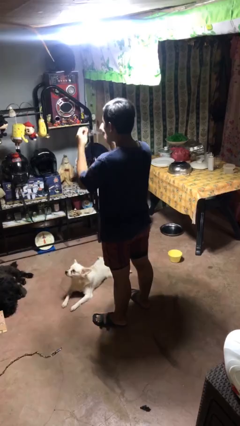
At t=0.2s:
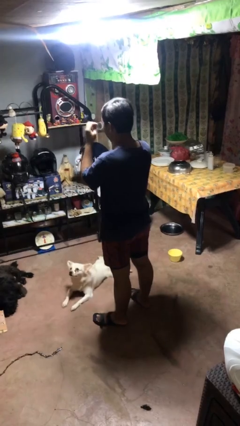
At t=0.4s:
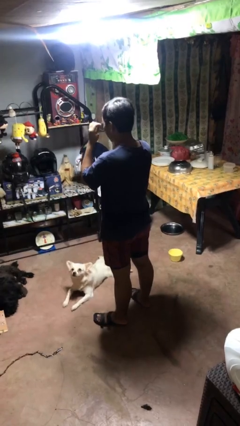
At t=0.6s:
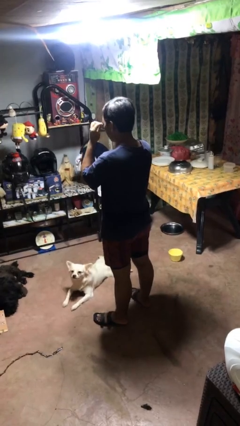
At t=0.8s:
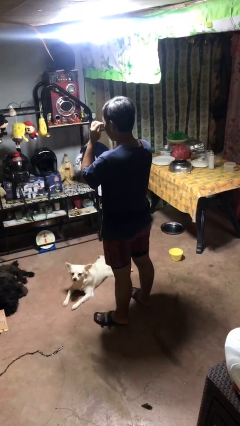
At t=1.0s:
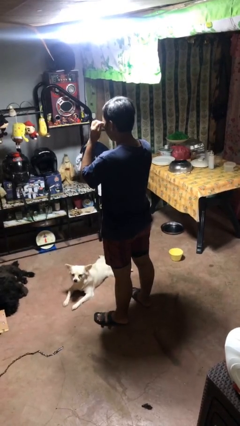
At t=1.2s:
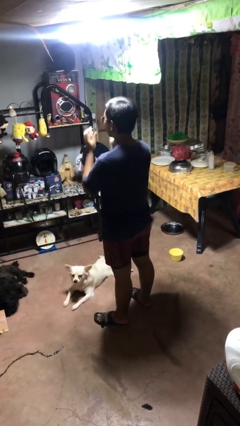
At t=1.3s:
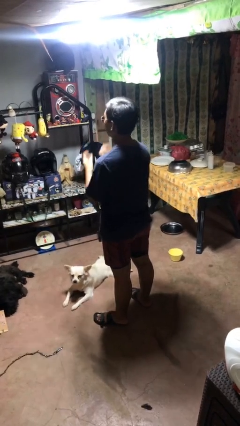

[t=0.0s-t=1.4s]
person puts on sunglasses

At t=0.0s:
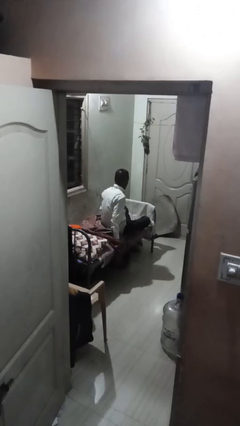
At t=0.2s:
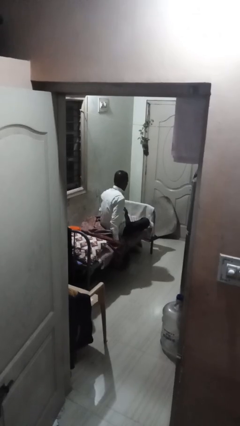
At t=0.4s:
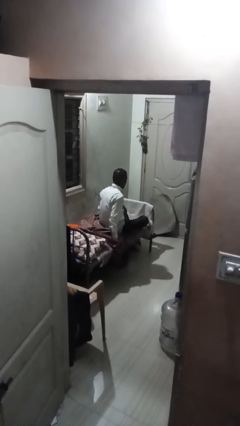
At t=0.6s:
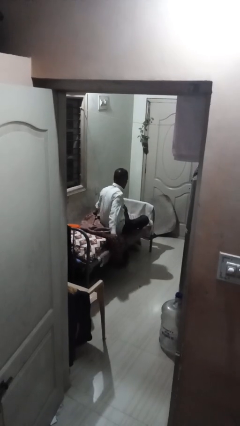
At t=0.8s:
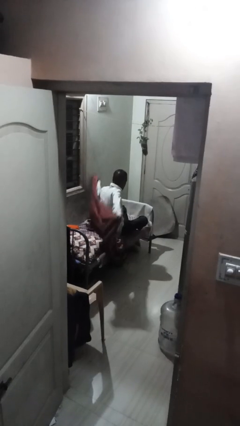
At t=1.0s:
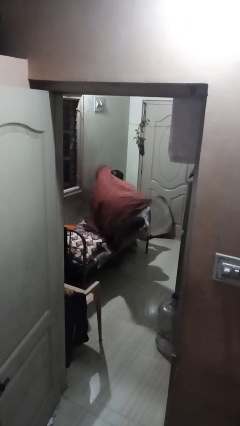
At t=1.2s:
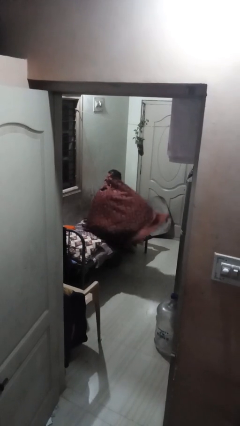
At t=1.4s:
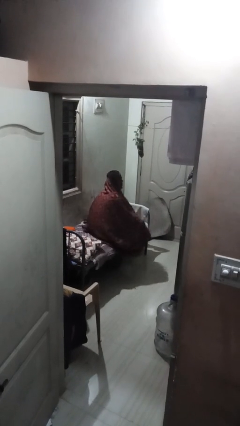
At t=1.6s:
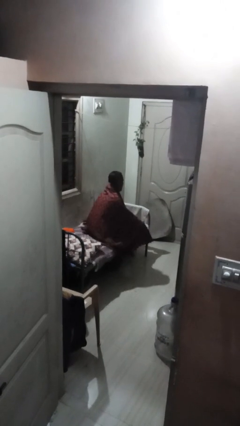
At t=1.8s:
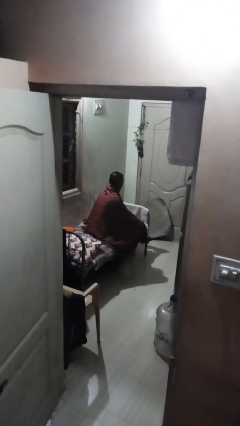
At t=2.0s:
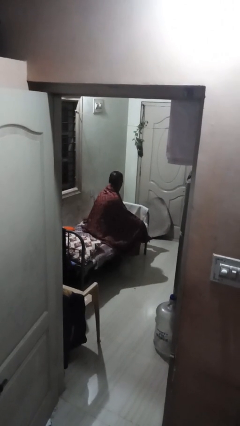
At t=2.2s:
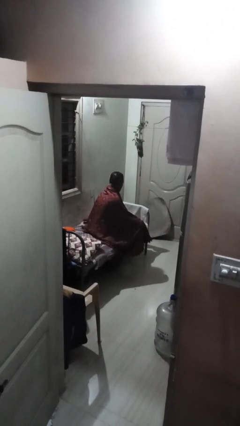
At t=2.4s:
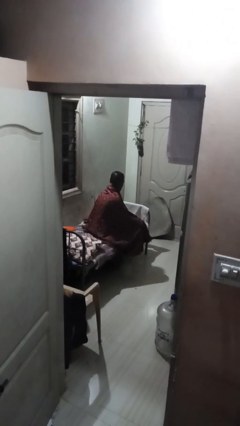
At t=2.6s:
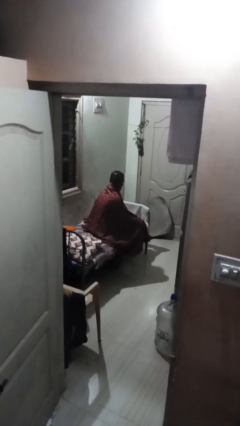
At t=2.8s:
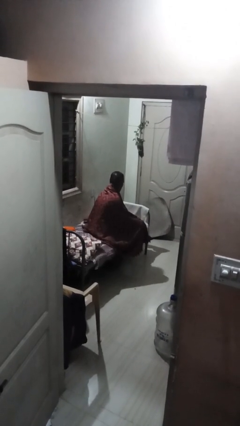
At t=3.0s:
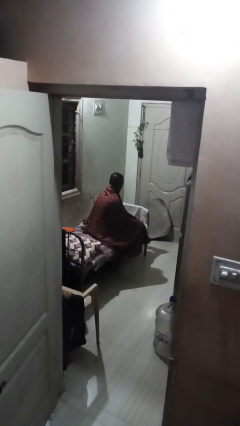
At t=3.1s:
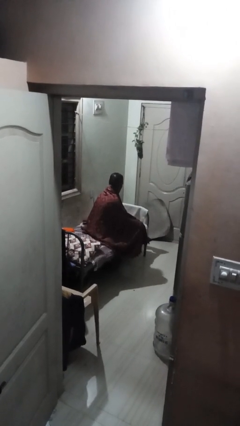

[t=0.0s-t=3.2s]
person covers with blanket

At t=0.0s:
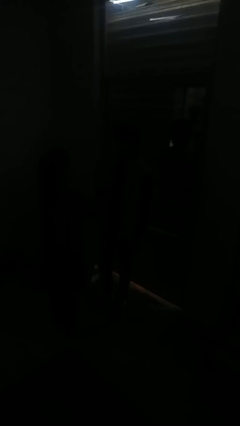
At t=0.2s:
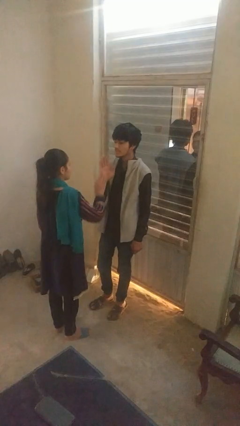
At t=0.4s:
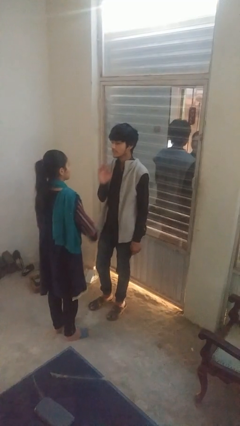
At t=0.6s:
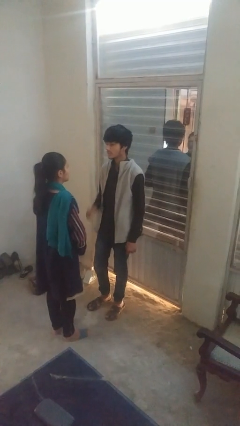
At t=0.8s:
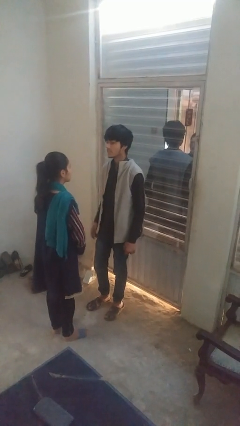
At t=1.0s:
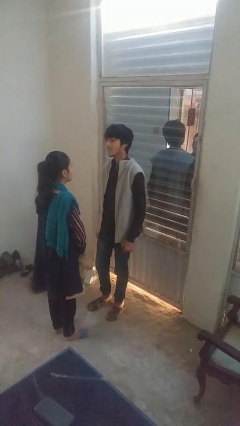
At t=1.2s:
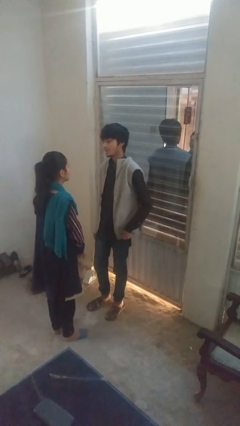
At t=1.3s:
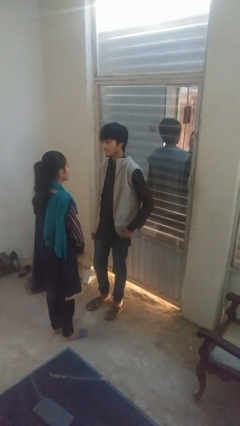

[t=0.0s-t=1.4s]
person highfives hand

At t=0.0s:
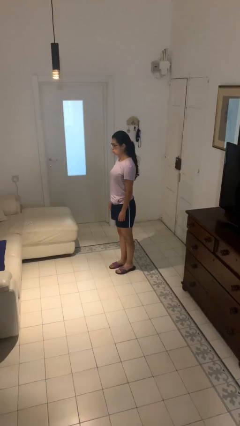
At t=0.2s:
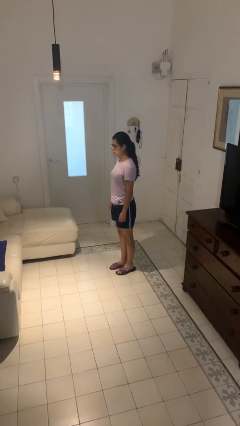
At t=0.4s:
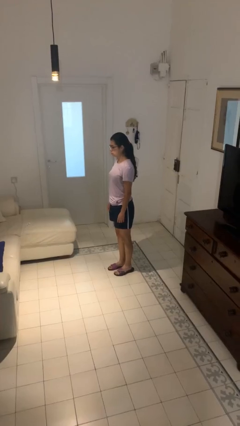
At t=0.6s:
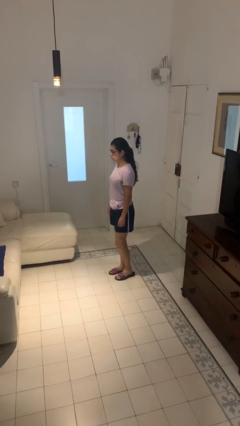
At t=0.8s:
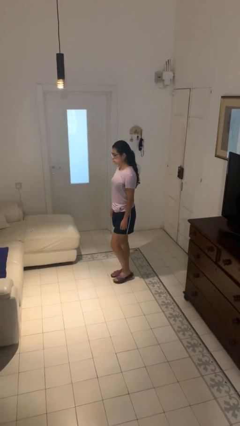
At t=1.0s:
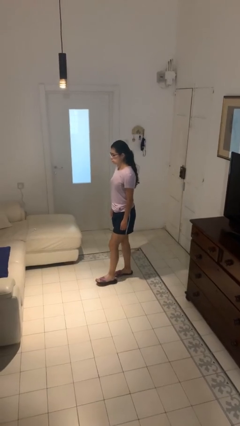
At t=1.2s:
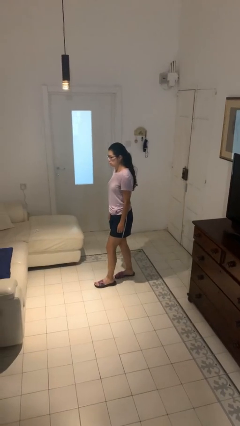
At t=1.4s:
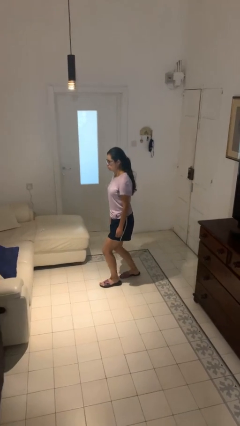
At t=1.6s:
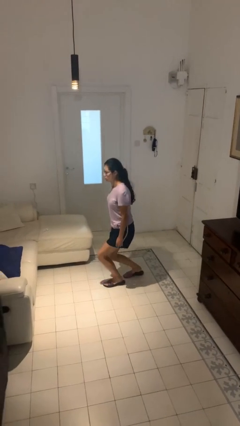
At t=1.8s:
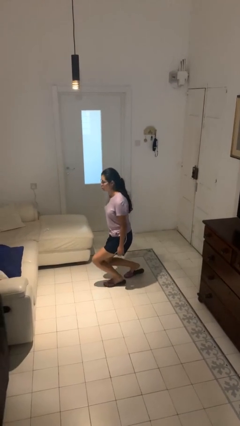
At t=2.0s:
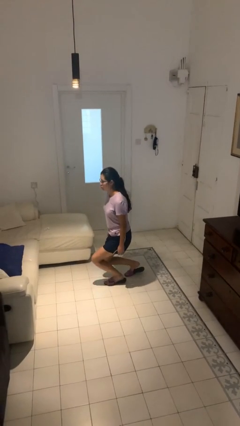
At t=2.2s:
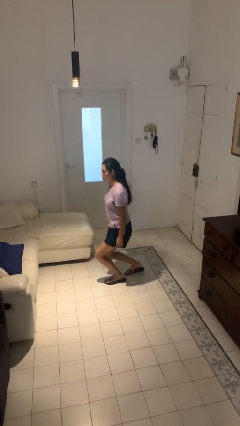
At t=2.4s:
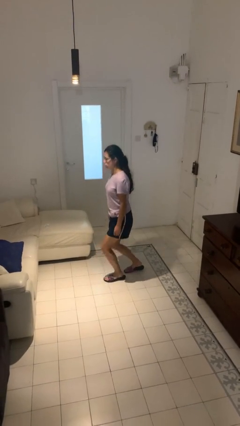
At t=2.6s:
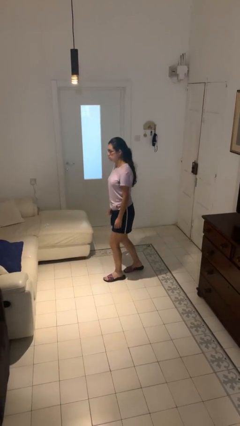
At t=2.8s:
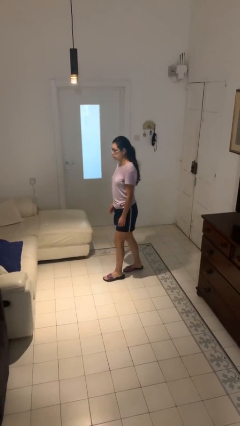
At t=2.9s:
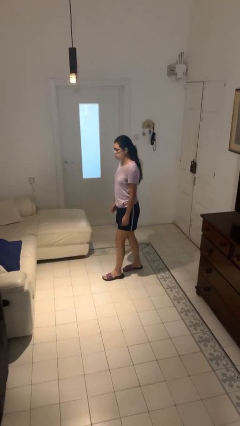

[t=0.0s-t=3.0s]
person exercises with lunges

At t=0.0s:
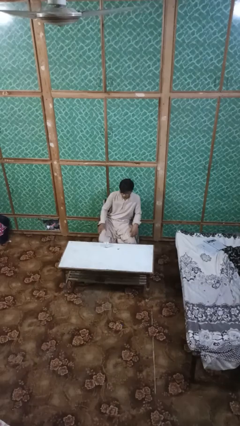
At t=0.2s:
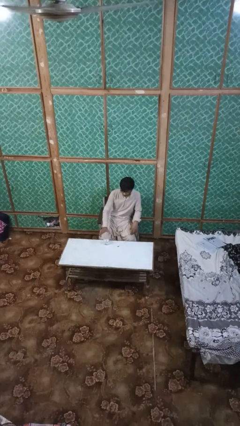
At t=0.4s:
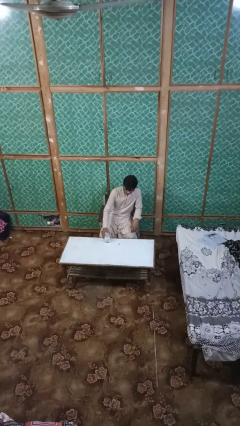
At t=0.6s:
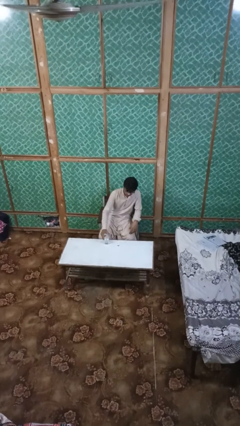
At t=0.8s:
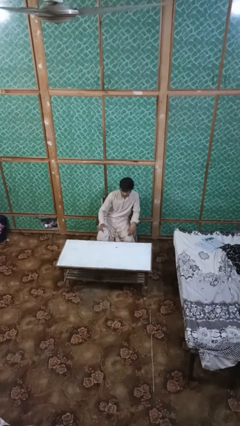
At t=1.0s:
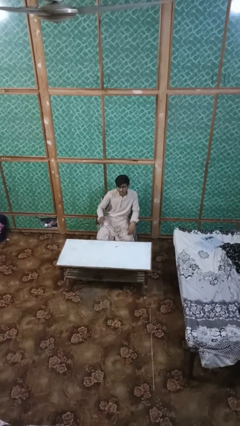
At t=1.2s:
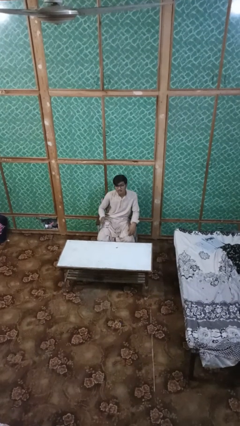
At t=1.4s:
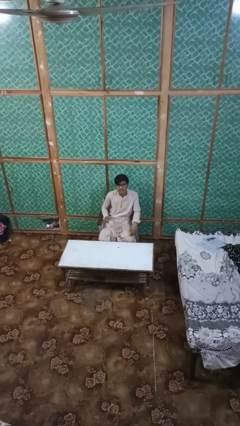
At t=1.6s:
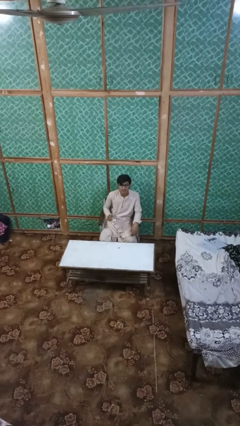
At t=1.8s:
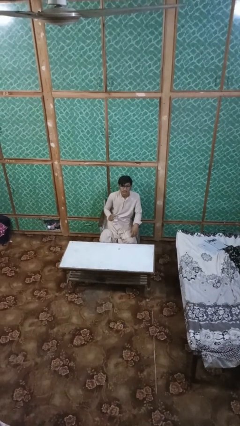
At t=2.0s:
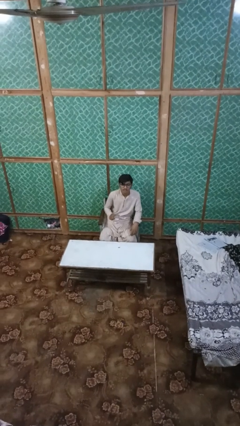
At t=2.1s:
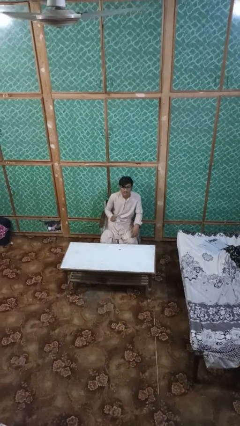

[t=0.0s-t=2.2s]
person picks up object from table

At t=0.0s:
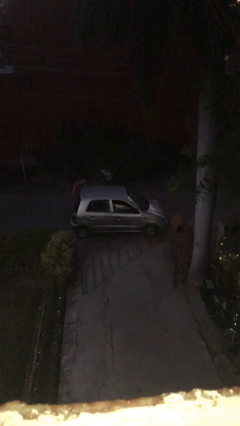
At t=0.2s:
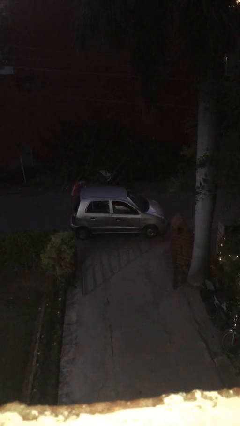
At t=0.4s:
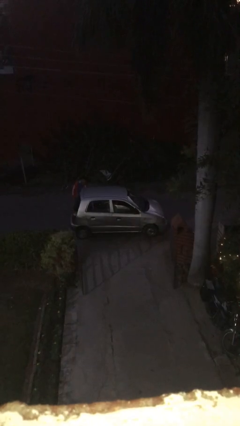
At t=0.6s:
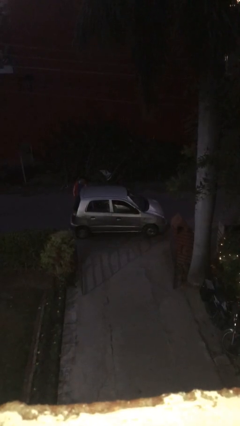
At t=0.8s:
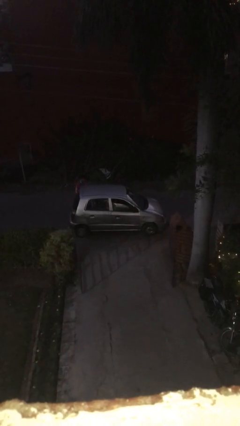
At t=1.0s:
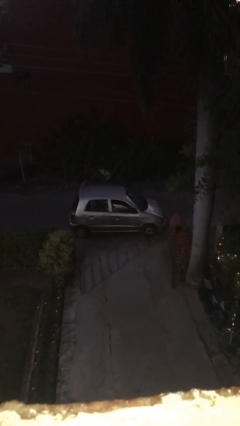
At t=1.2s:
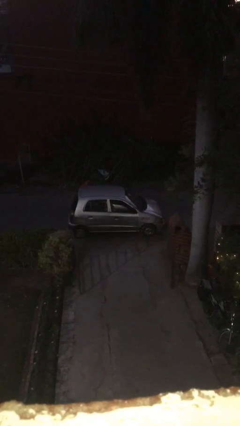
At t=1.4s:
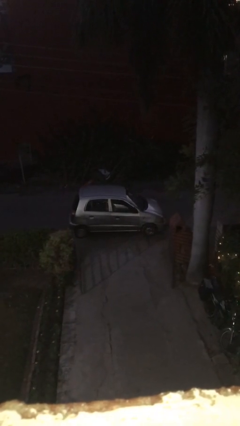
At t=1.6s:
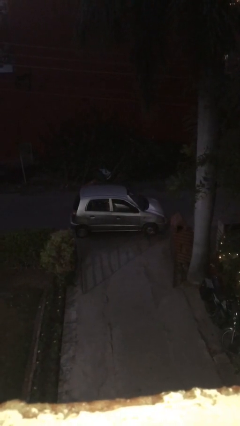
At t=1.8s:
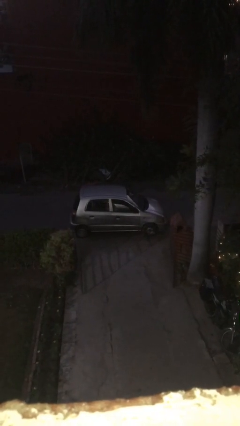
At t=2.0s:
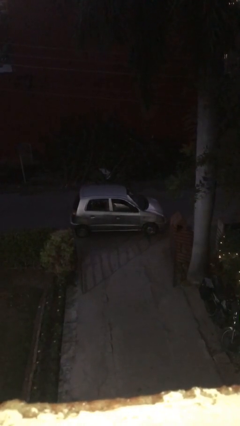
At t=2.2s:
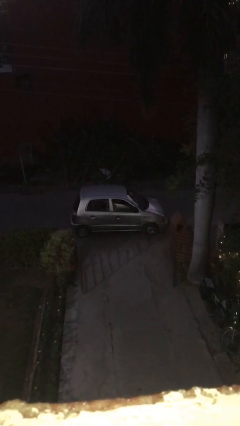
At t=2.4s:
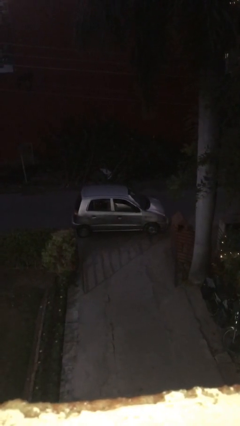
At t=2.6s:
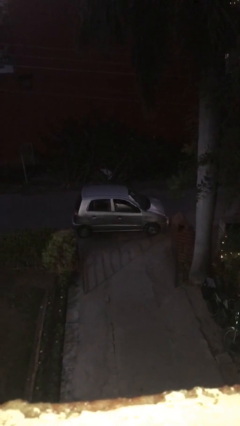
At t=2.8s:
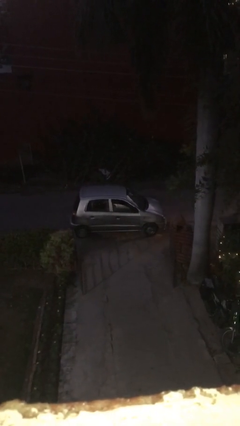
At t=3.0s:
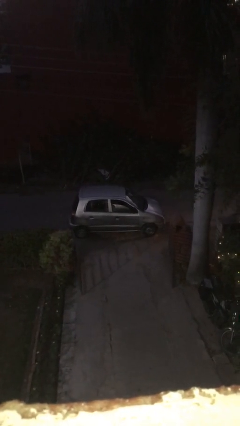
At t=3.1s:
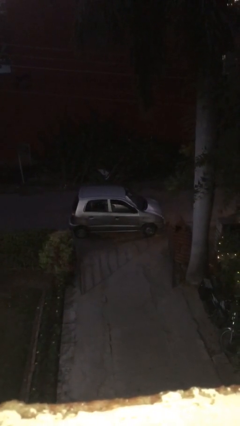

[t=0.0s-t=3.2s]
car picks up person

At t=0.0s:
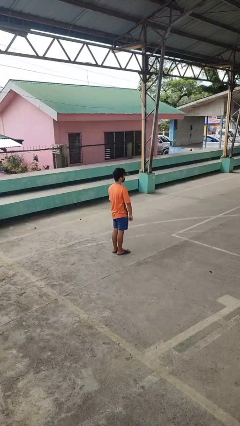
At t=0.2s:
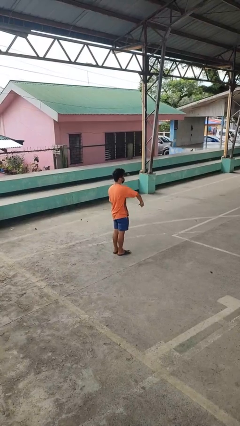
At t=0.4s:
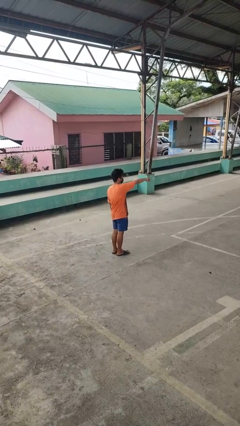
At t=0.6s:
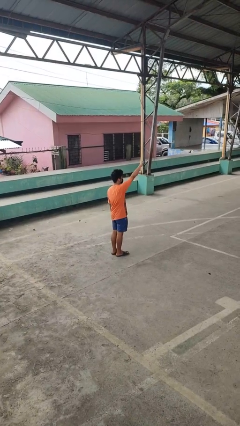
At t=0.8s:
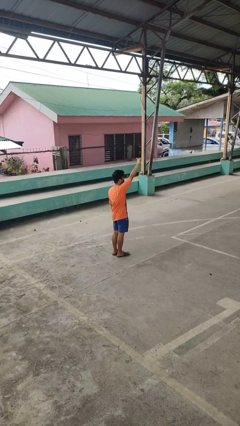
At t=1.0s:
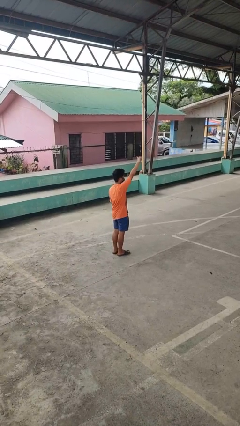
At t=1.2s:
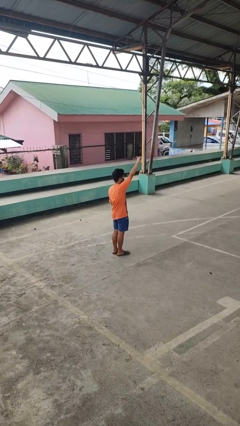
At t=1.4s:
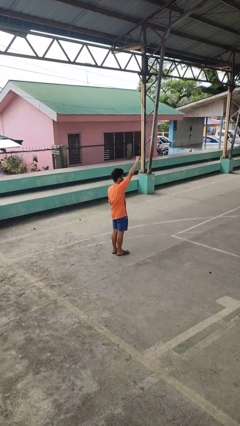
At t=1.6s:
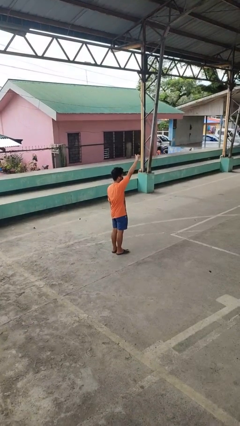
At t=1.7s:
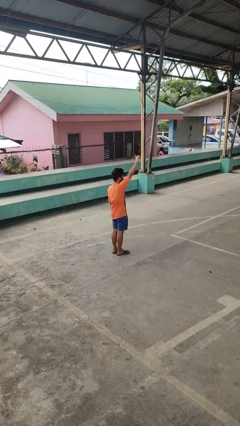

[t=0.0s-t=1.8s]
person gestures swipe up

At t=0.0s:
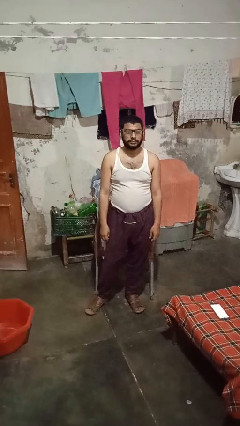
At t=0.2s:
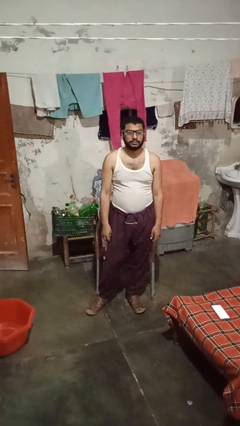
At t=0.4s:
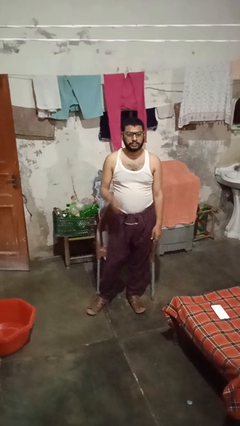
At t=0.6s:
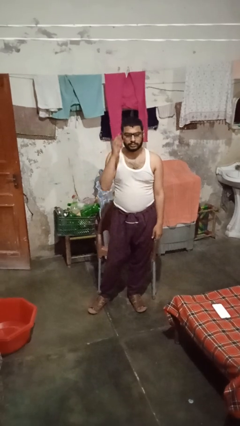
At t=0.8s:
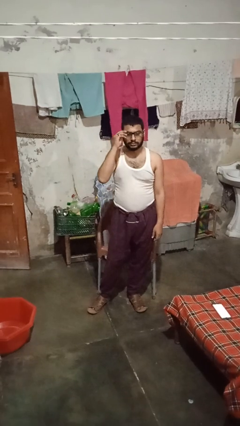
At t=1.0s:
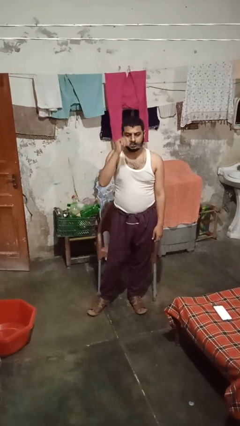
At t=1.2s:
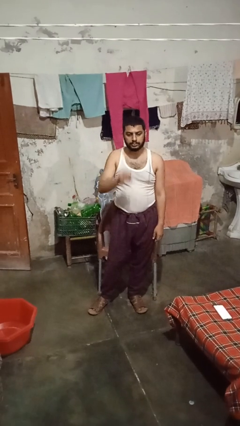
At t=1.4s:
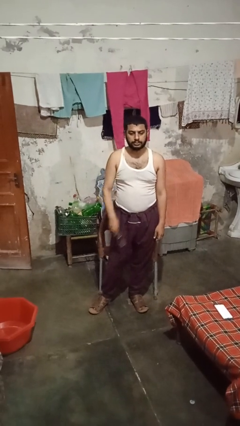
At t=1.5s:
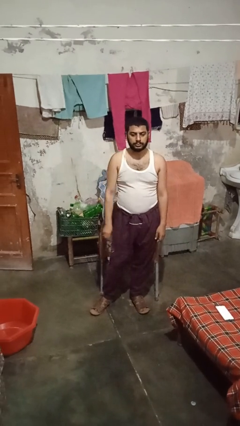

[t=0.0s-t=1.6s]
person takes off glasses
